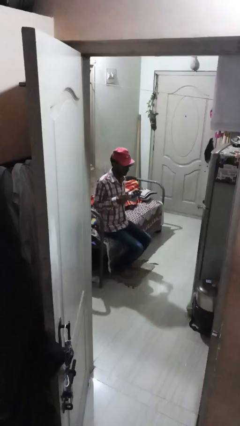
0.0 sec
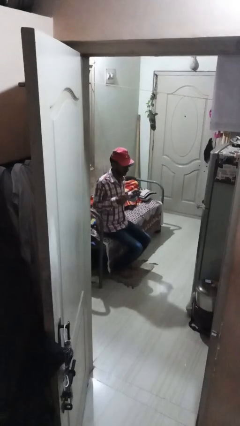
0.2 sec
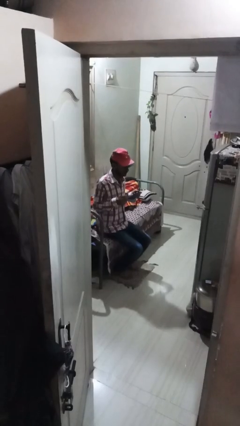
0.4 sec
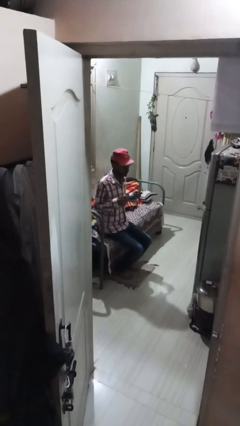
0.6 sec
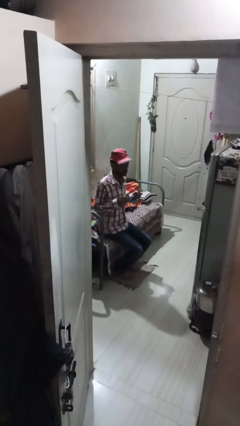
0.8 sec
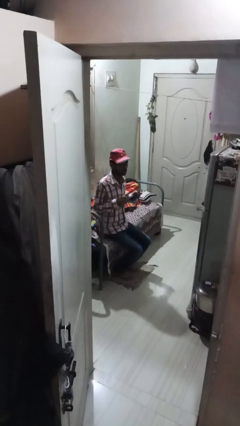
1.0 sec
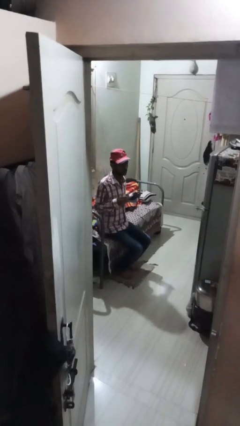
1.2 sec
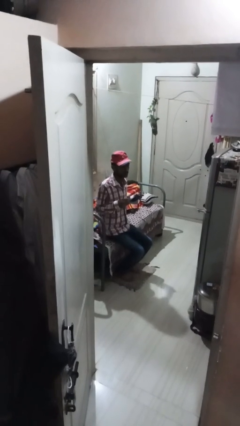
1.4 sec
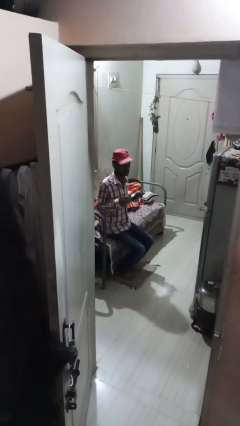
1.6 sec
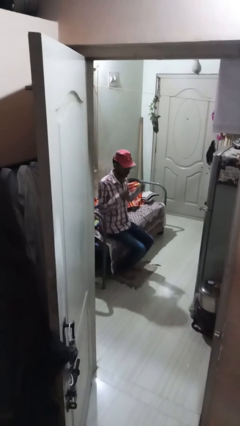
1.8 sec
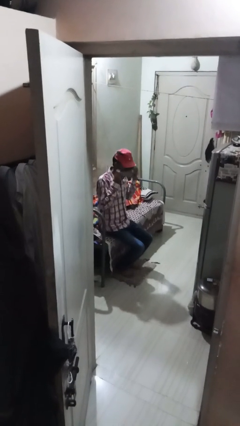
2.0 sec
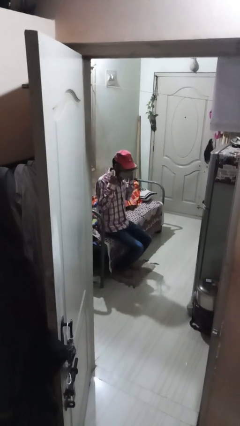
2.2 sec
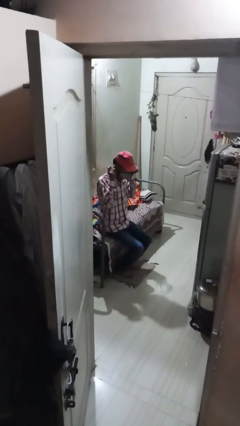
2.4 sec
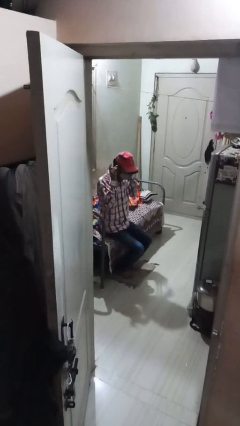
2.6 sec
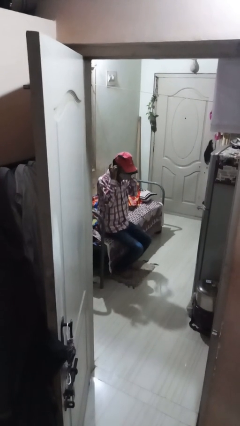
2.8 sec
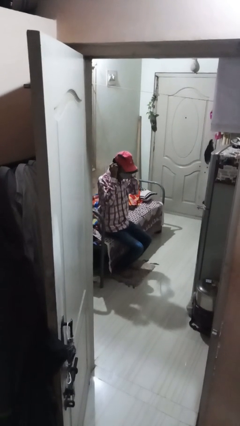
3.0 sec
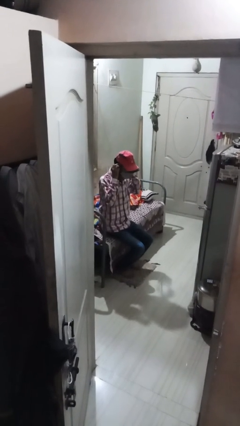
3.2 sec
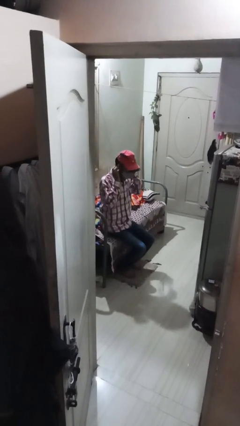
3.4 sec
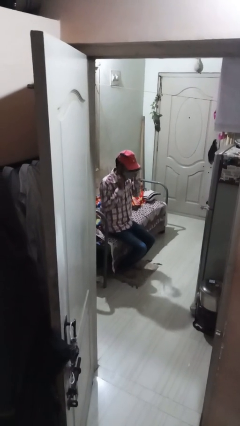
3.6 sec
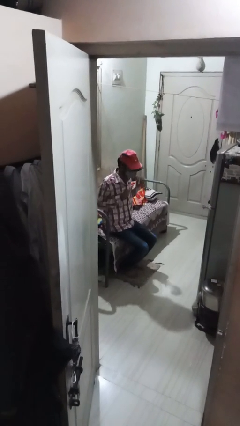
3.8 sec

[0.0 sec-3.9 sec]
person puts on facemask

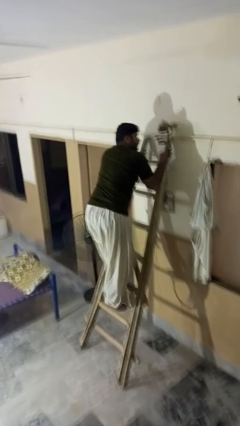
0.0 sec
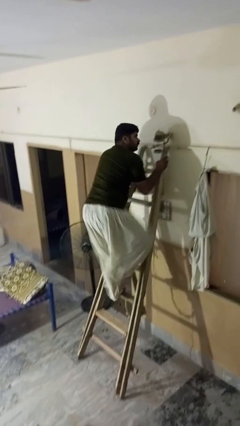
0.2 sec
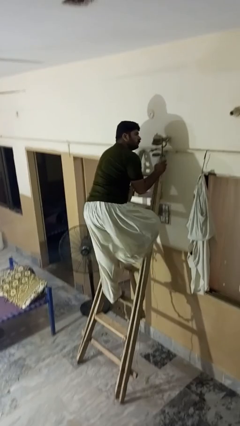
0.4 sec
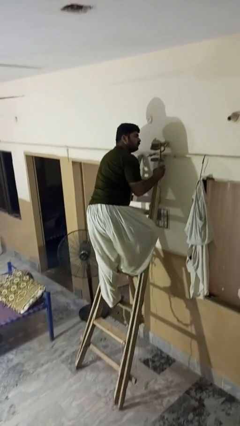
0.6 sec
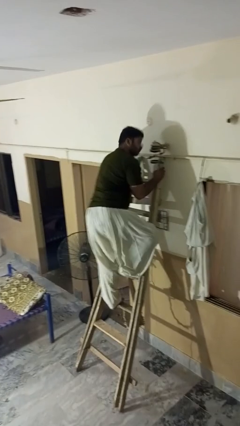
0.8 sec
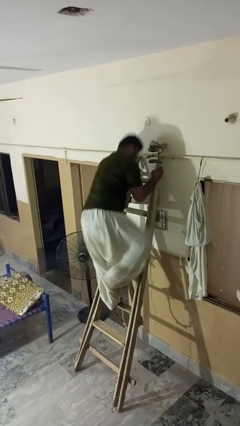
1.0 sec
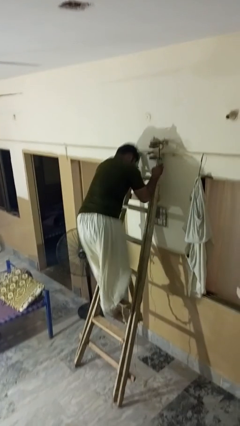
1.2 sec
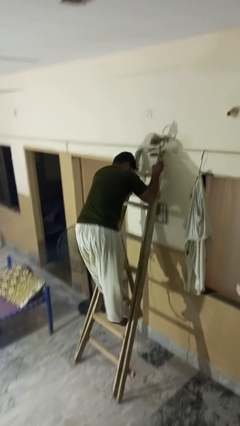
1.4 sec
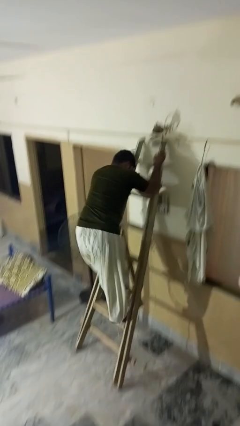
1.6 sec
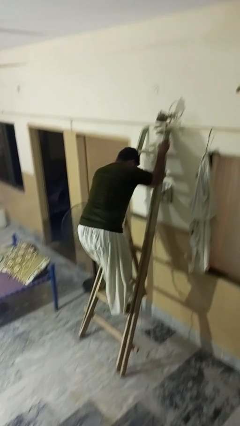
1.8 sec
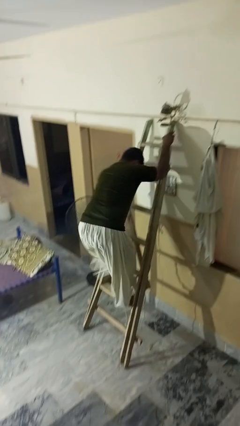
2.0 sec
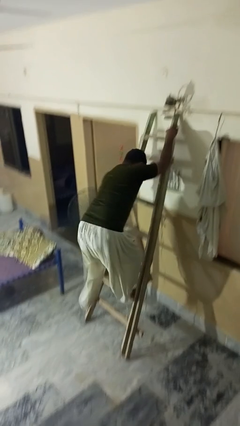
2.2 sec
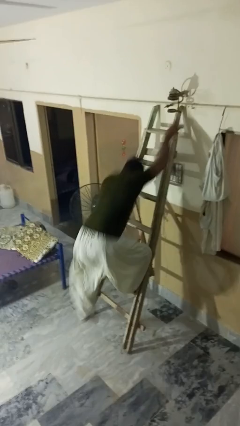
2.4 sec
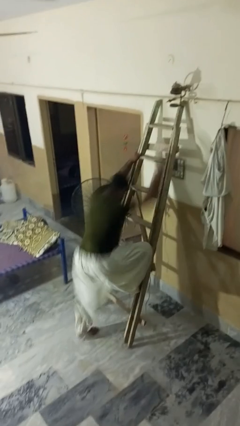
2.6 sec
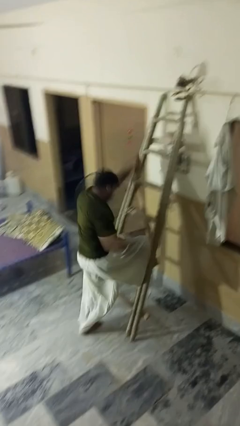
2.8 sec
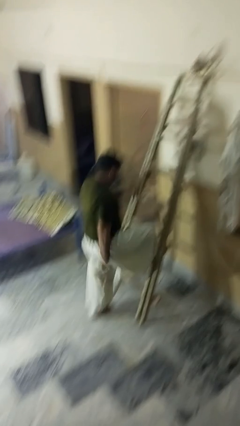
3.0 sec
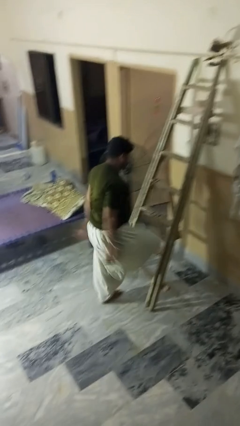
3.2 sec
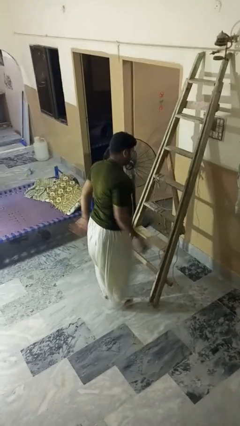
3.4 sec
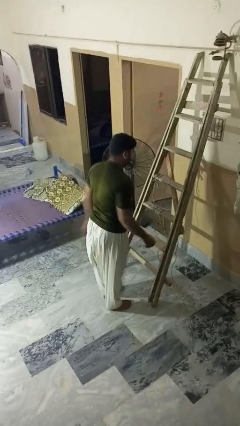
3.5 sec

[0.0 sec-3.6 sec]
person climbs down ladder

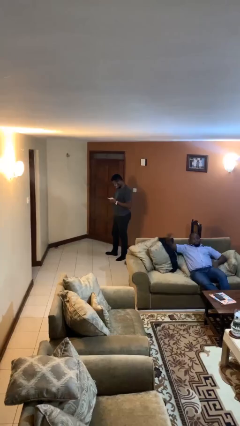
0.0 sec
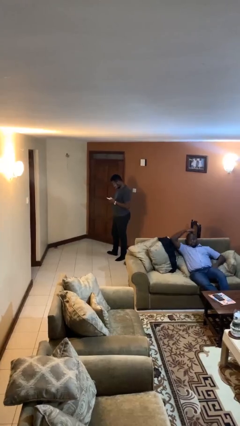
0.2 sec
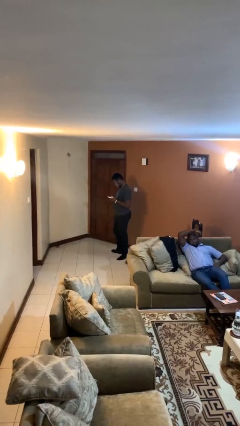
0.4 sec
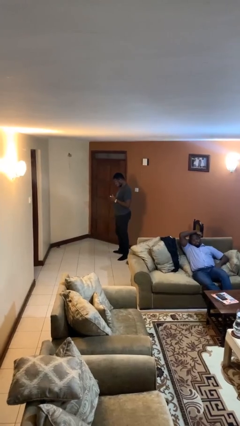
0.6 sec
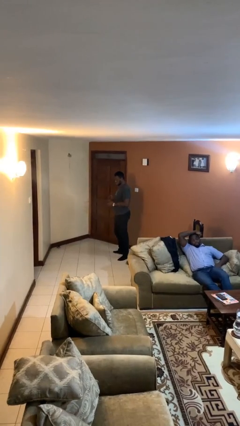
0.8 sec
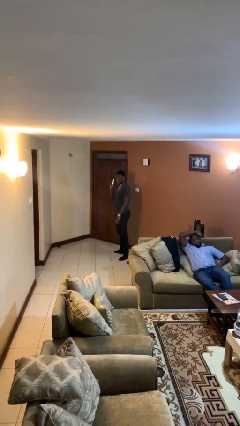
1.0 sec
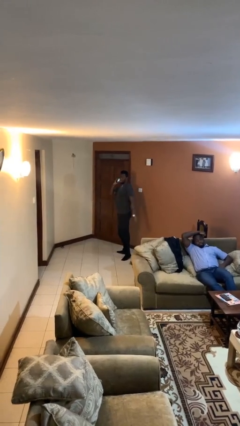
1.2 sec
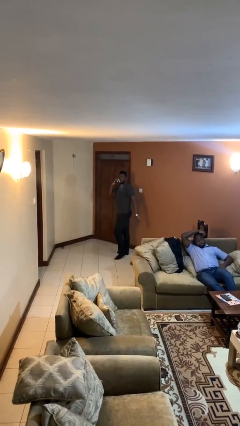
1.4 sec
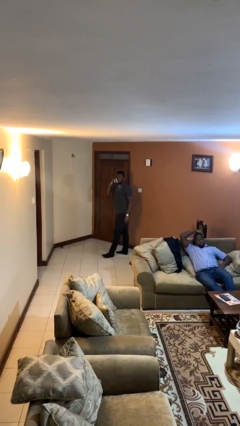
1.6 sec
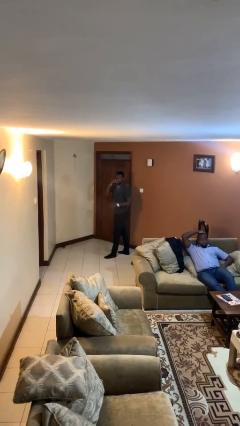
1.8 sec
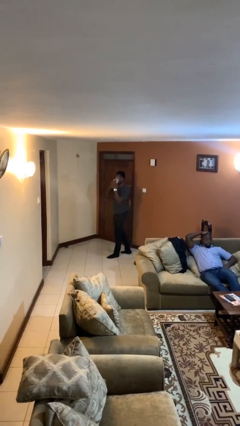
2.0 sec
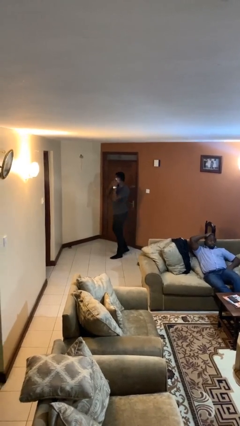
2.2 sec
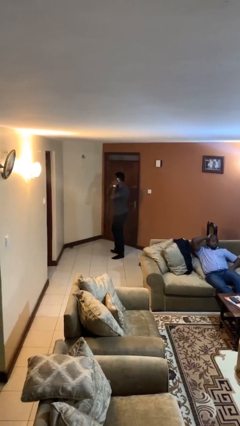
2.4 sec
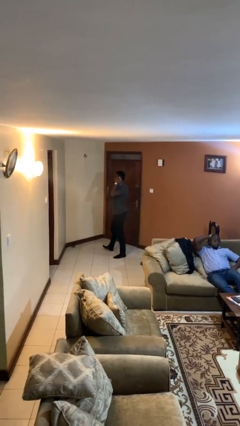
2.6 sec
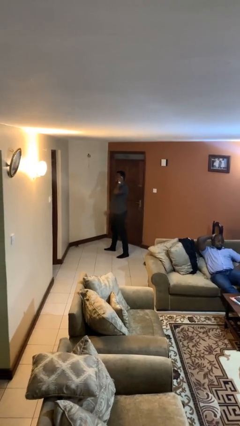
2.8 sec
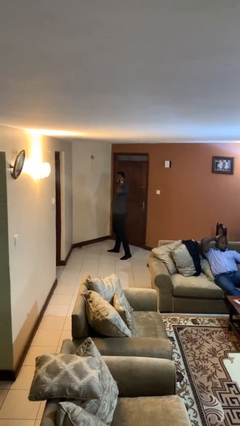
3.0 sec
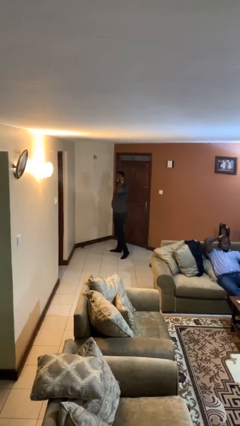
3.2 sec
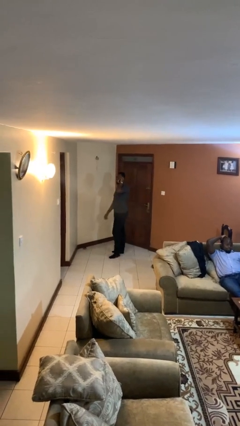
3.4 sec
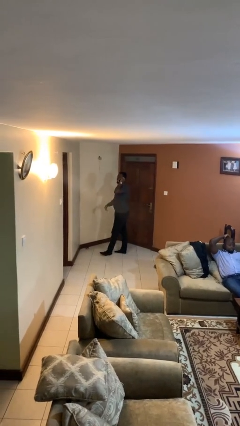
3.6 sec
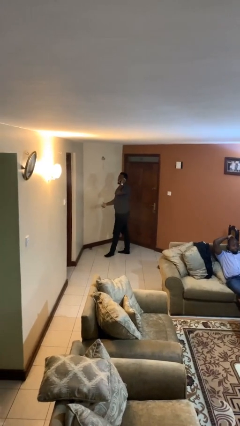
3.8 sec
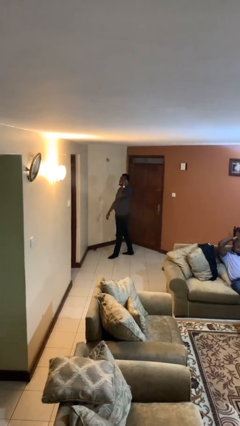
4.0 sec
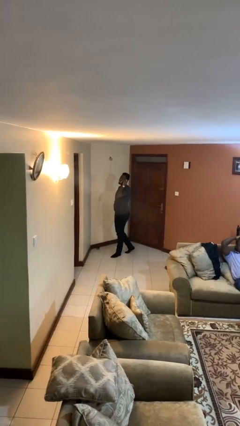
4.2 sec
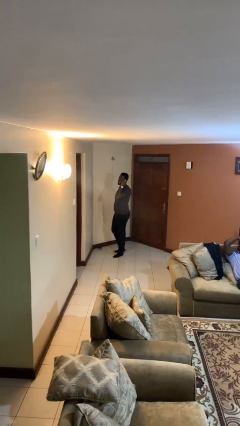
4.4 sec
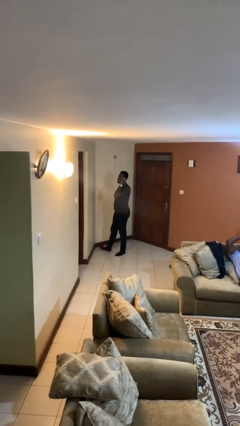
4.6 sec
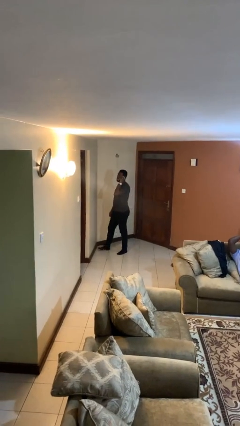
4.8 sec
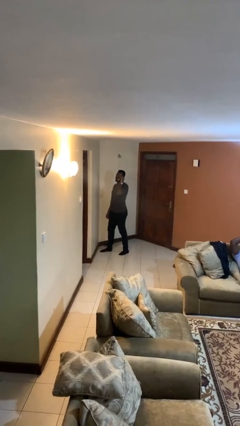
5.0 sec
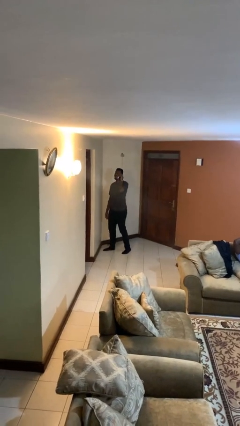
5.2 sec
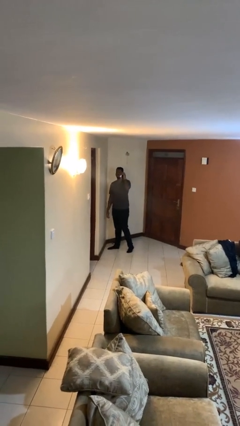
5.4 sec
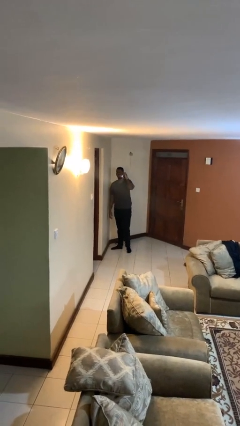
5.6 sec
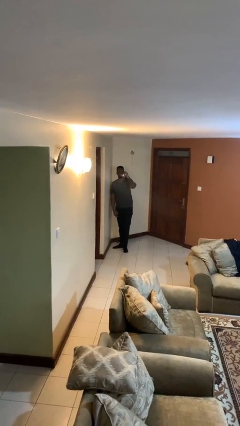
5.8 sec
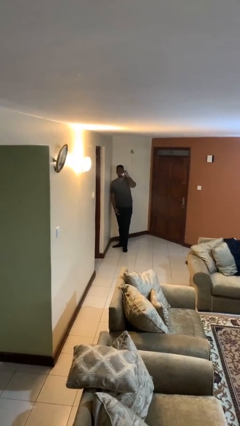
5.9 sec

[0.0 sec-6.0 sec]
person talks on phone

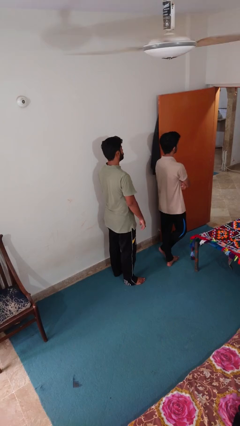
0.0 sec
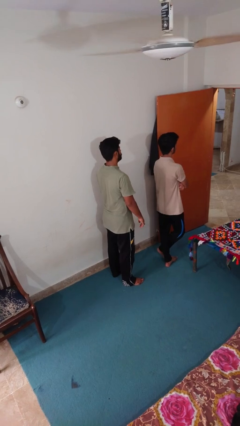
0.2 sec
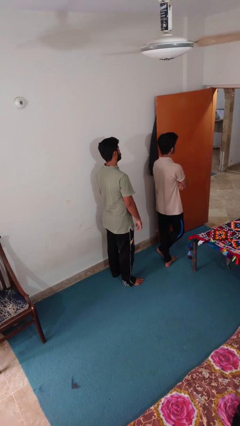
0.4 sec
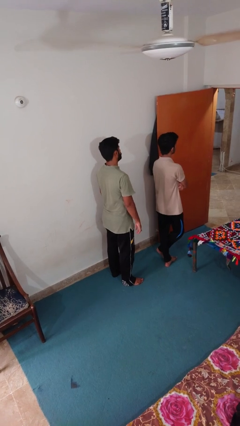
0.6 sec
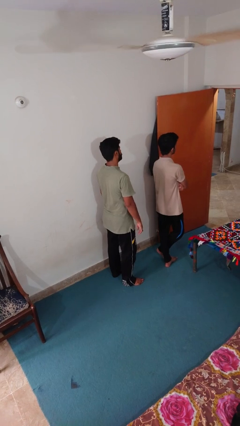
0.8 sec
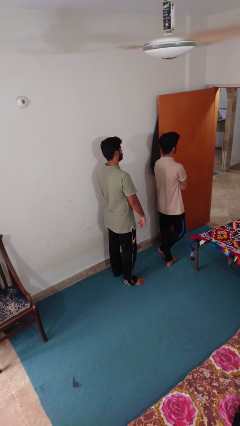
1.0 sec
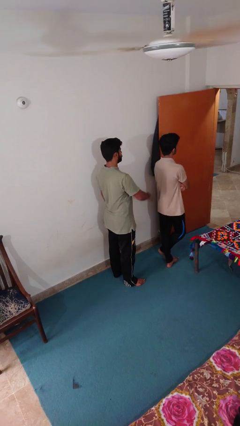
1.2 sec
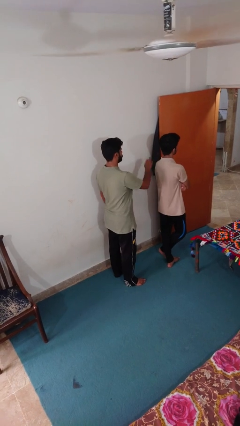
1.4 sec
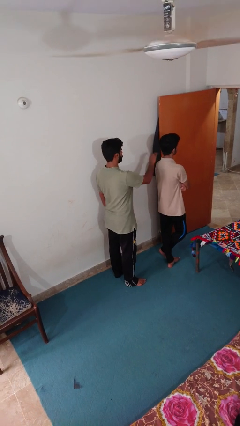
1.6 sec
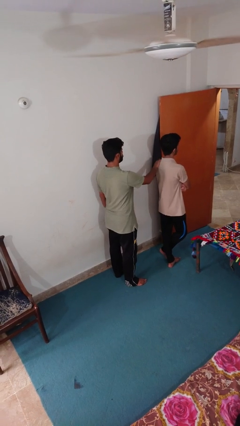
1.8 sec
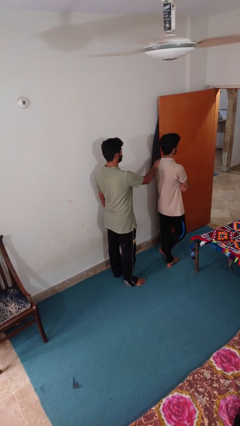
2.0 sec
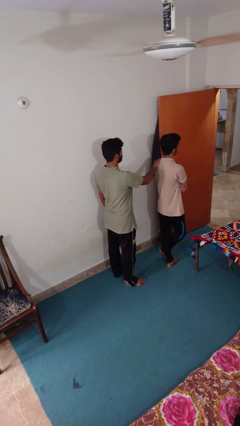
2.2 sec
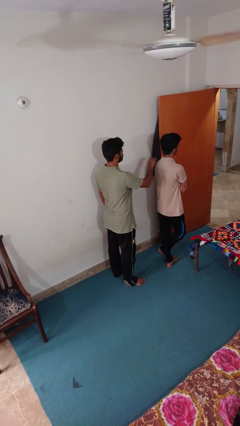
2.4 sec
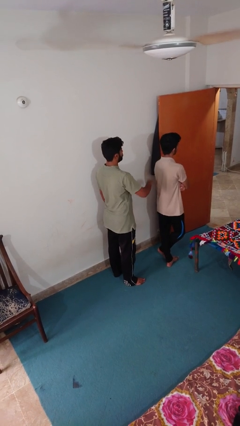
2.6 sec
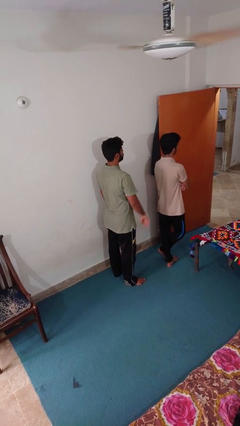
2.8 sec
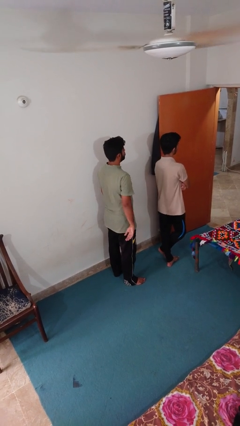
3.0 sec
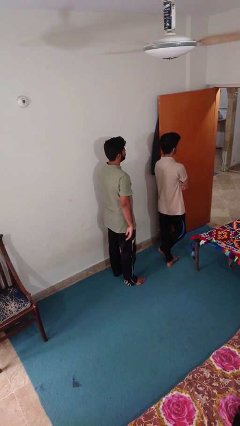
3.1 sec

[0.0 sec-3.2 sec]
person touches back of person

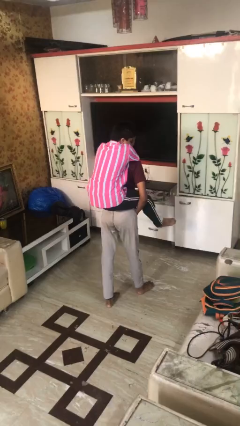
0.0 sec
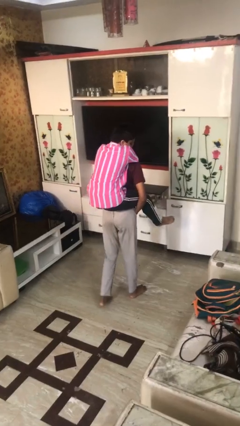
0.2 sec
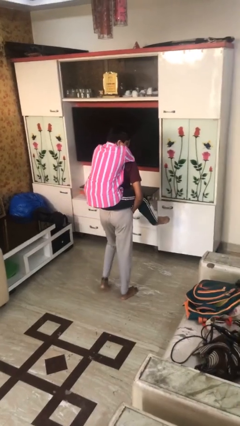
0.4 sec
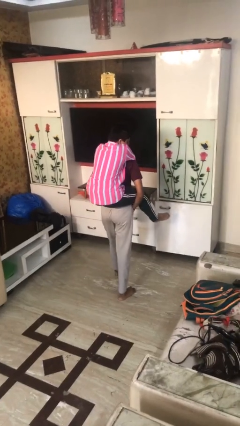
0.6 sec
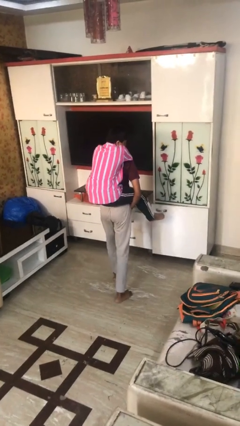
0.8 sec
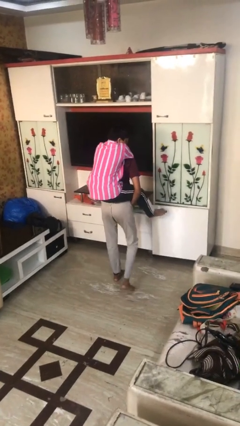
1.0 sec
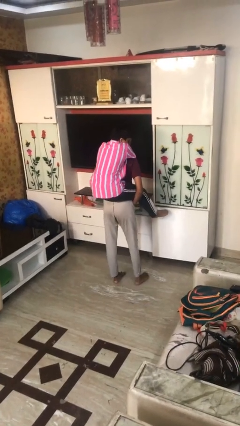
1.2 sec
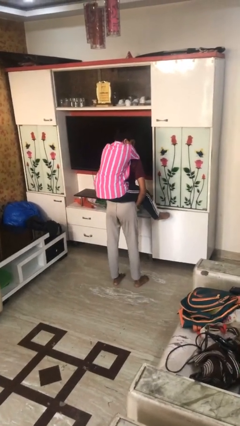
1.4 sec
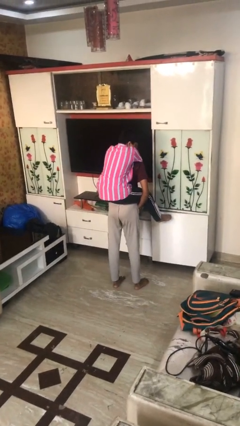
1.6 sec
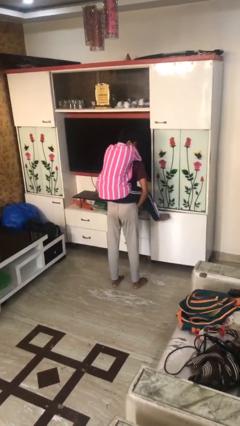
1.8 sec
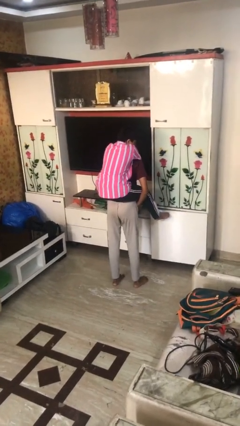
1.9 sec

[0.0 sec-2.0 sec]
person carries person on back
